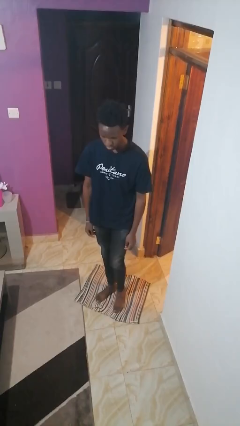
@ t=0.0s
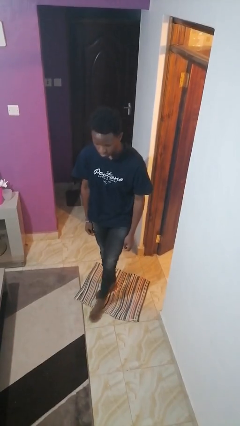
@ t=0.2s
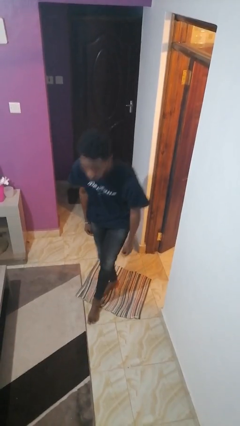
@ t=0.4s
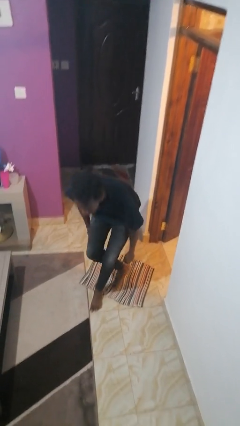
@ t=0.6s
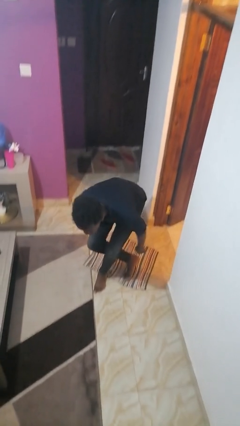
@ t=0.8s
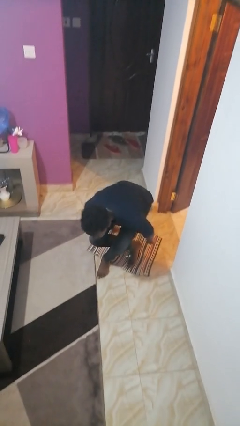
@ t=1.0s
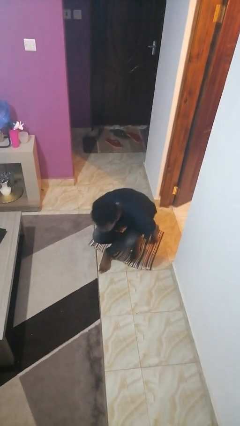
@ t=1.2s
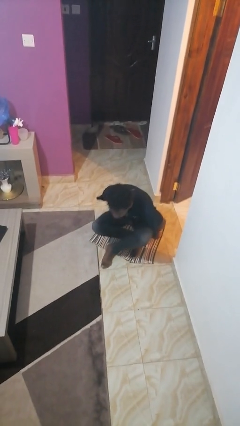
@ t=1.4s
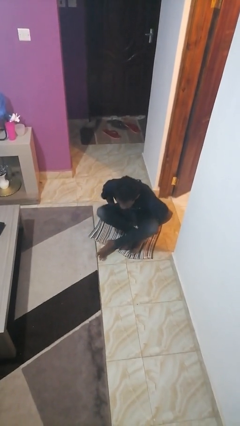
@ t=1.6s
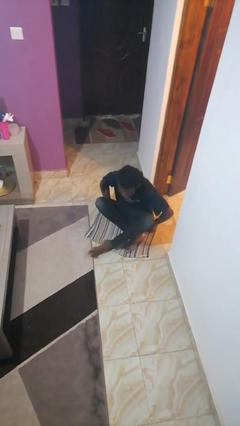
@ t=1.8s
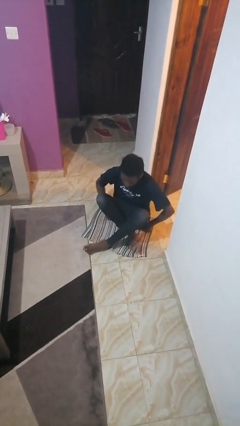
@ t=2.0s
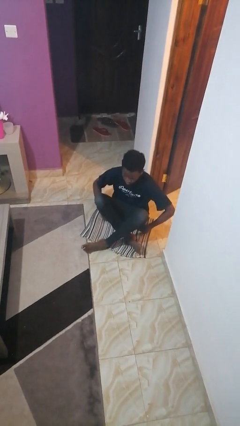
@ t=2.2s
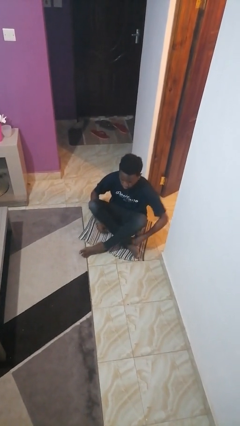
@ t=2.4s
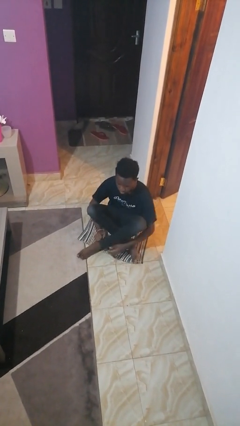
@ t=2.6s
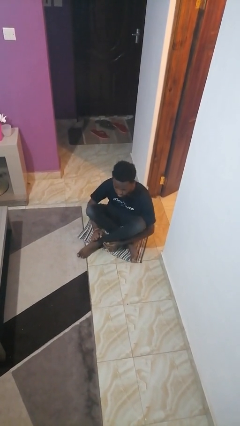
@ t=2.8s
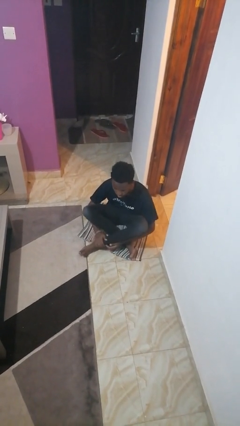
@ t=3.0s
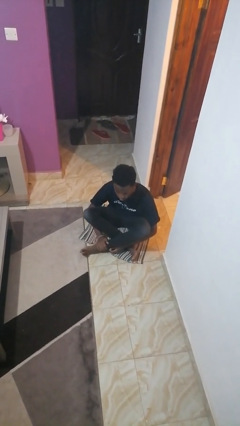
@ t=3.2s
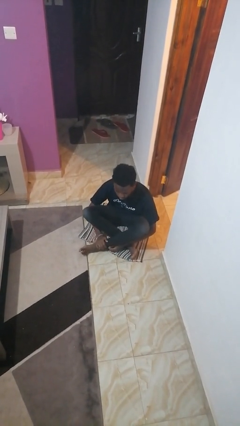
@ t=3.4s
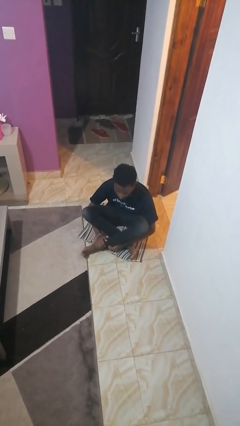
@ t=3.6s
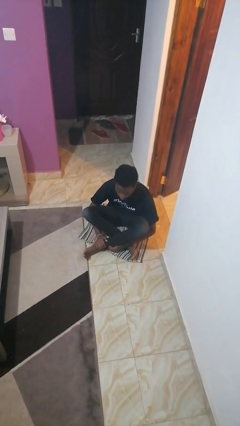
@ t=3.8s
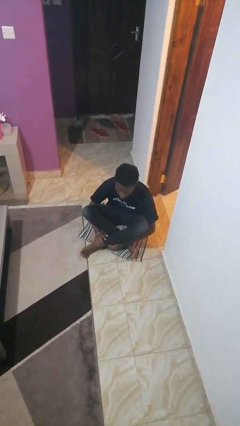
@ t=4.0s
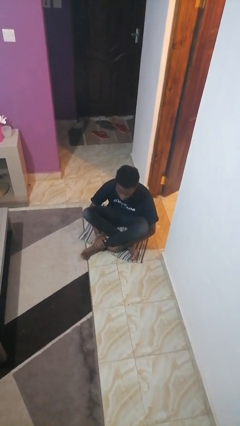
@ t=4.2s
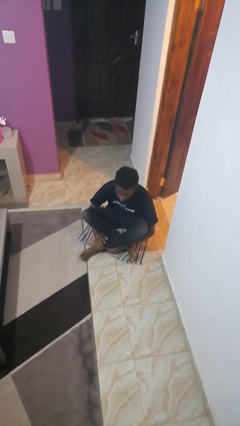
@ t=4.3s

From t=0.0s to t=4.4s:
person sits crisscross

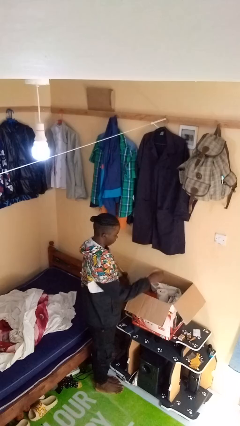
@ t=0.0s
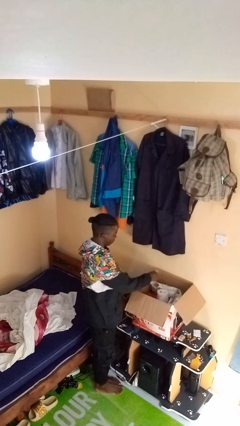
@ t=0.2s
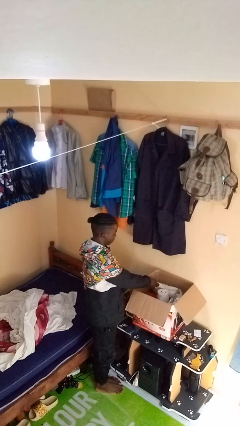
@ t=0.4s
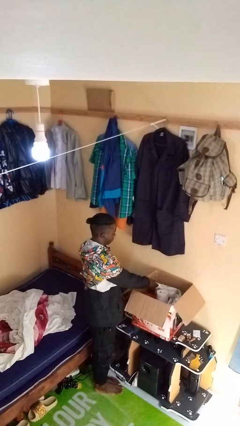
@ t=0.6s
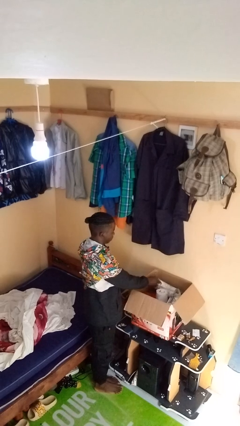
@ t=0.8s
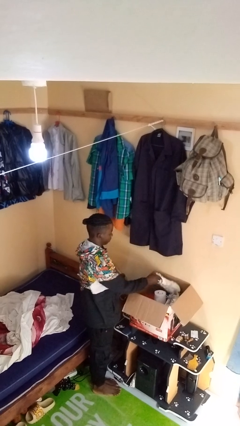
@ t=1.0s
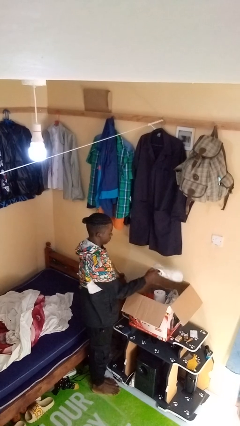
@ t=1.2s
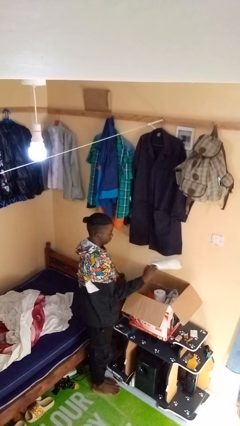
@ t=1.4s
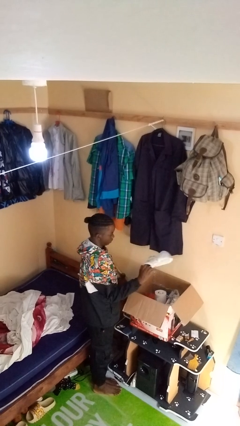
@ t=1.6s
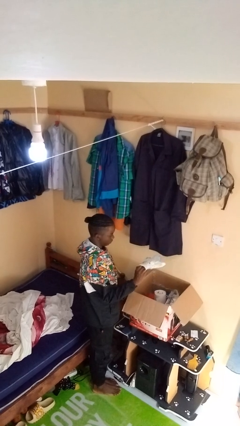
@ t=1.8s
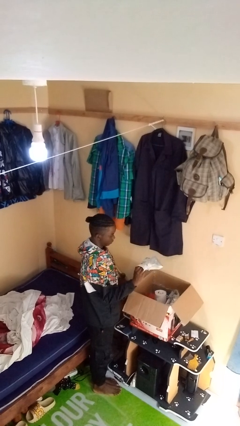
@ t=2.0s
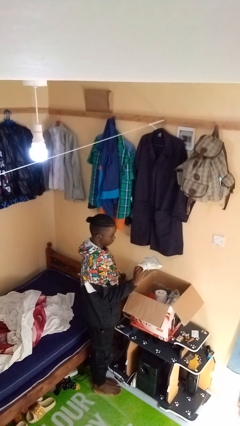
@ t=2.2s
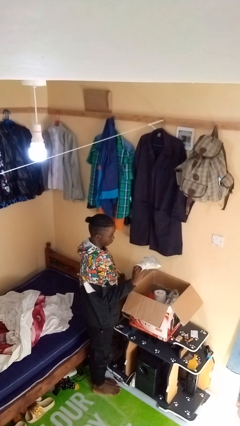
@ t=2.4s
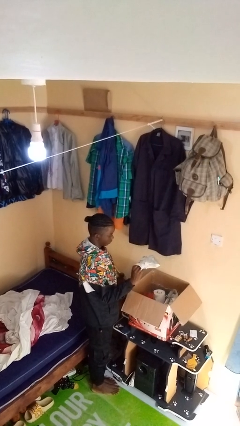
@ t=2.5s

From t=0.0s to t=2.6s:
person takes object from box

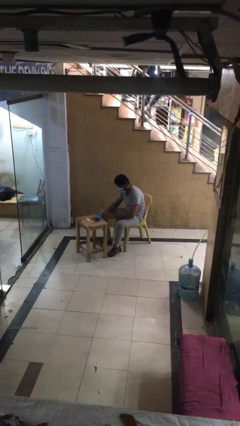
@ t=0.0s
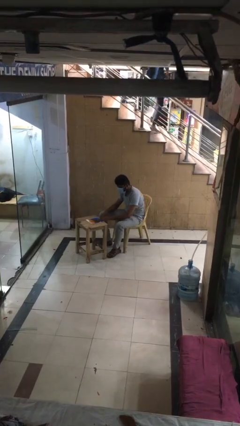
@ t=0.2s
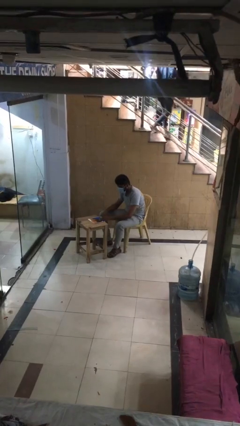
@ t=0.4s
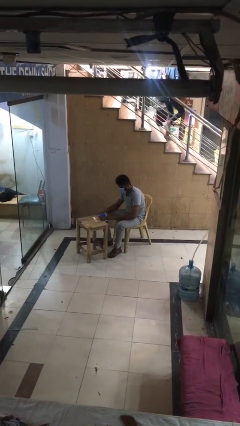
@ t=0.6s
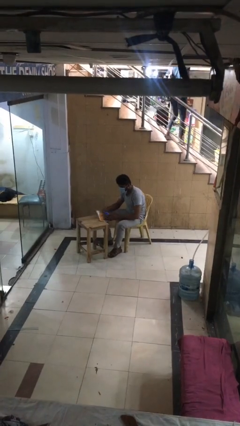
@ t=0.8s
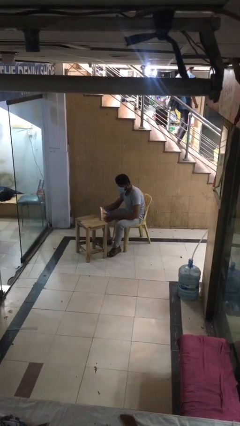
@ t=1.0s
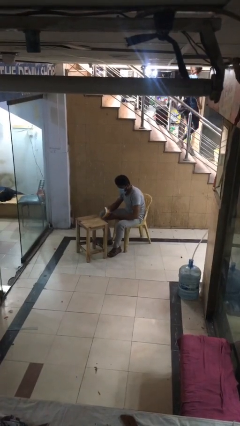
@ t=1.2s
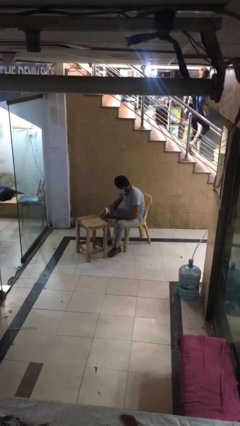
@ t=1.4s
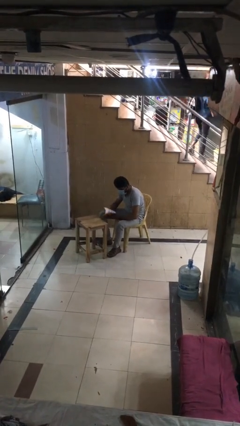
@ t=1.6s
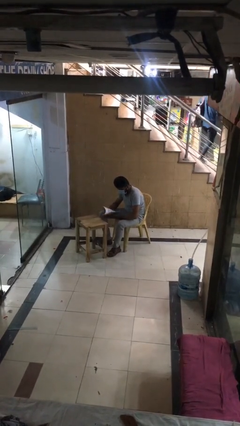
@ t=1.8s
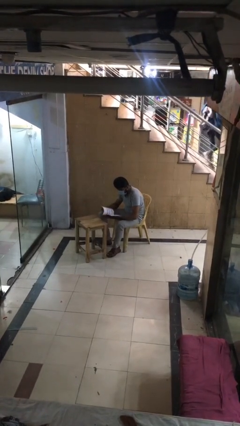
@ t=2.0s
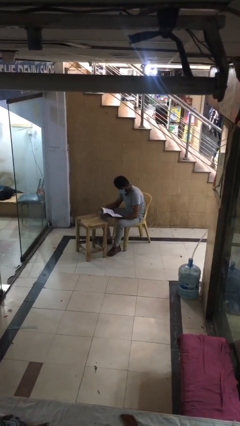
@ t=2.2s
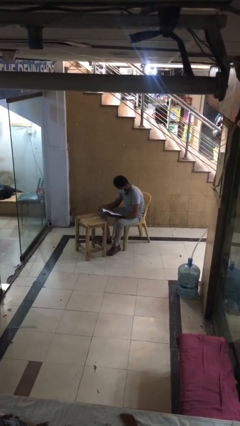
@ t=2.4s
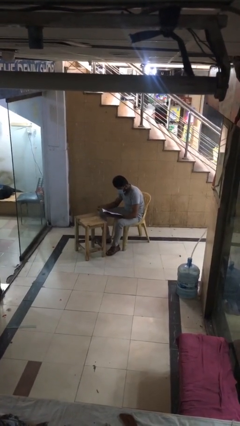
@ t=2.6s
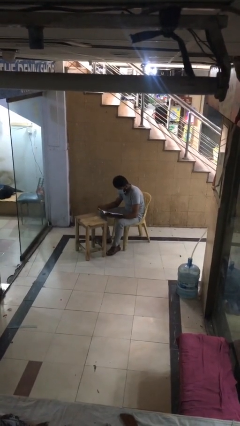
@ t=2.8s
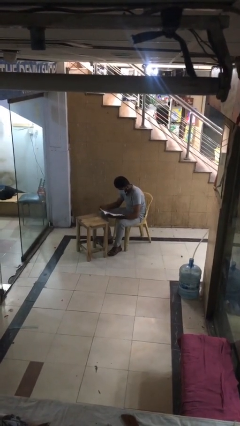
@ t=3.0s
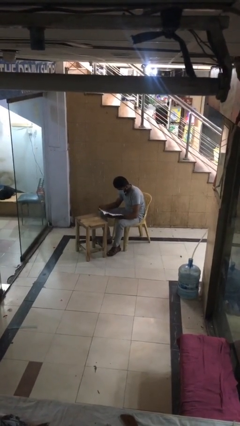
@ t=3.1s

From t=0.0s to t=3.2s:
person picks up object from table

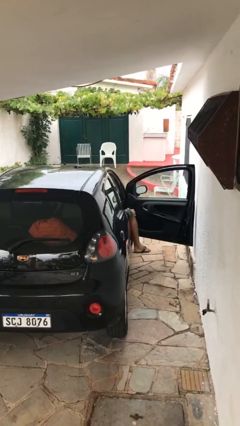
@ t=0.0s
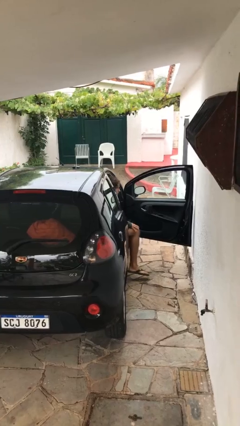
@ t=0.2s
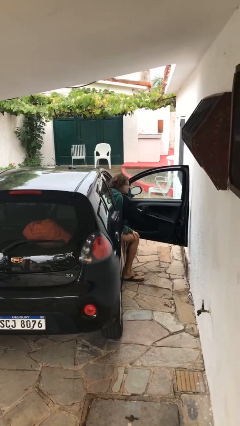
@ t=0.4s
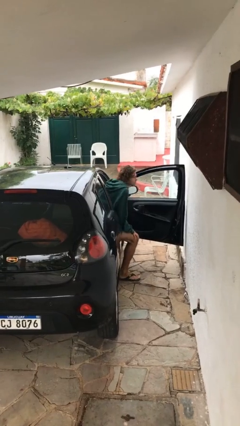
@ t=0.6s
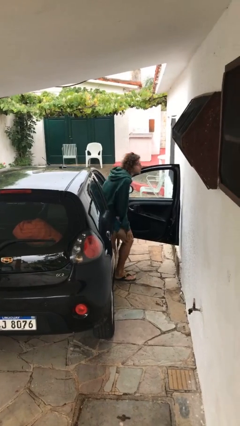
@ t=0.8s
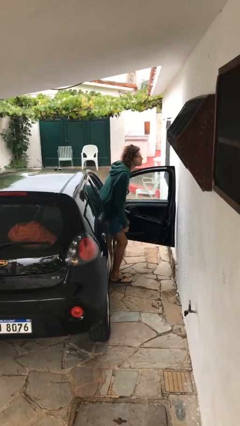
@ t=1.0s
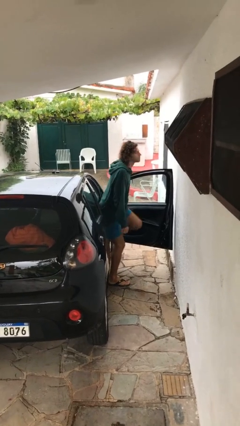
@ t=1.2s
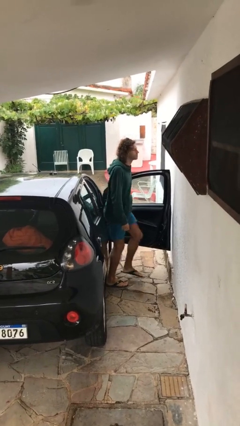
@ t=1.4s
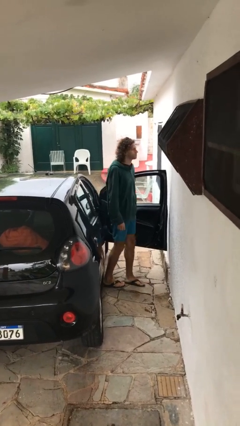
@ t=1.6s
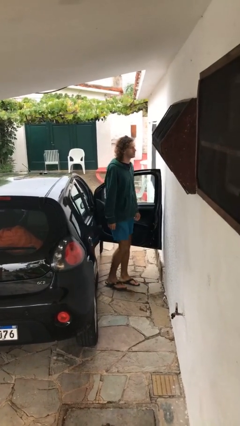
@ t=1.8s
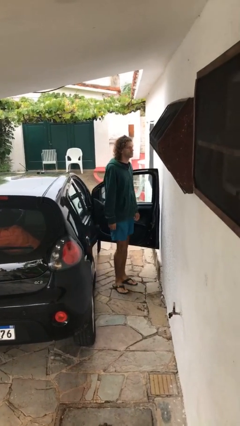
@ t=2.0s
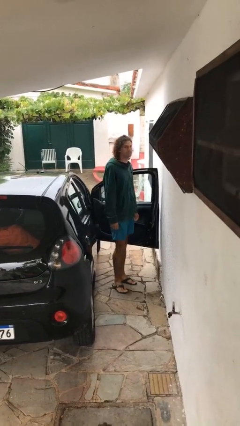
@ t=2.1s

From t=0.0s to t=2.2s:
person exits car

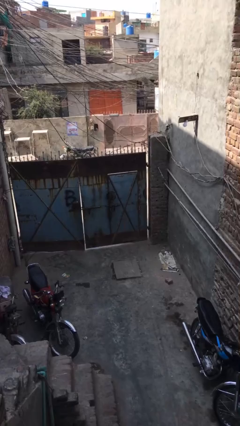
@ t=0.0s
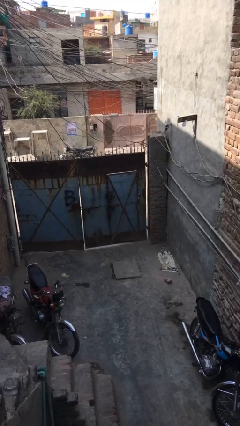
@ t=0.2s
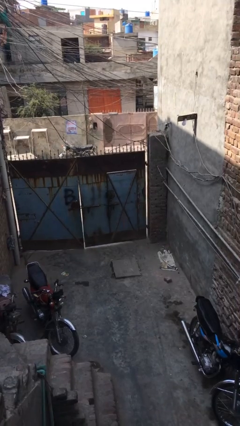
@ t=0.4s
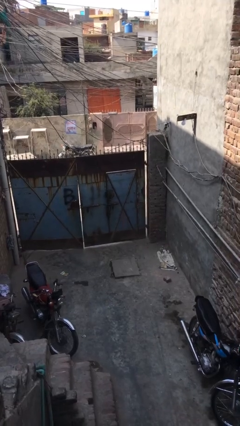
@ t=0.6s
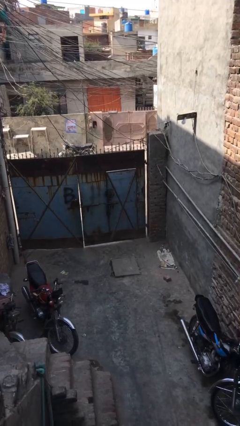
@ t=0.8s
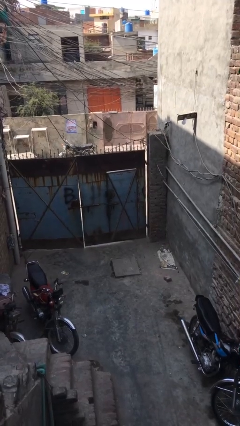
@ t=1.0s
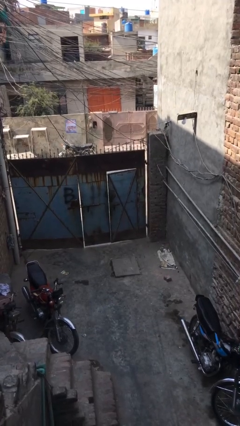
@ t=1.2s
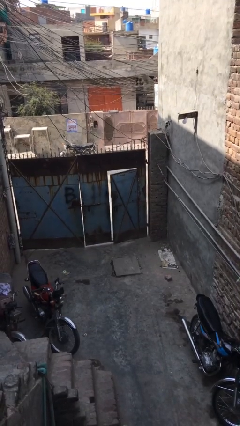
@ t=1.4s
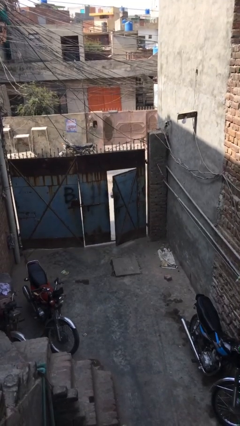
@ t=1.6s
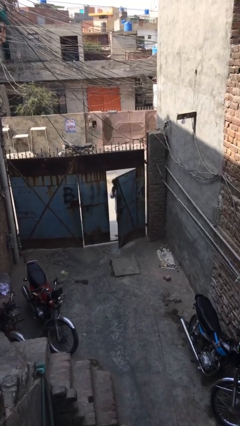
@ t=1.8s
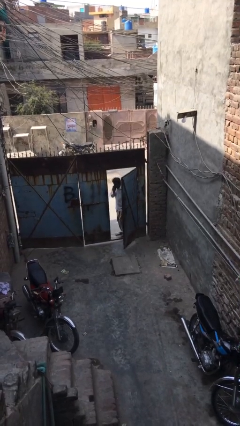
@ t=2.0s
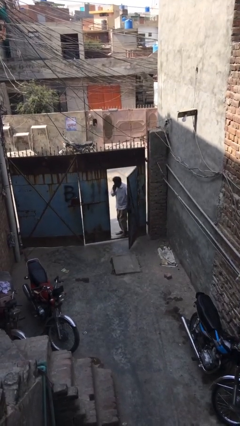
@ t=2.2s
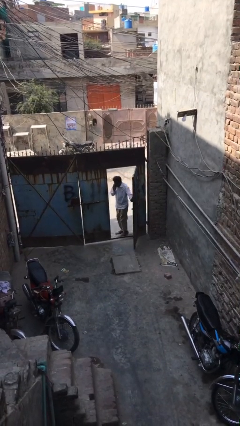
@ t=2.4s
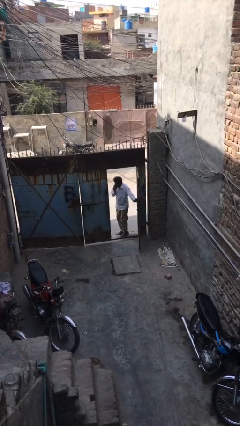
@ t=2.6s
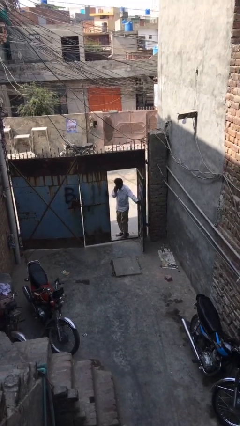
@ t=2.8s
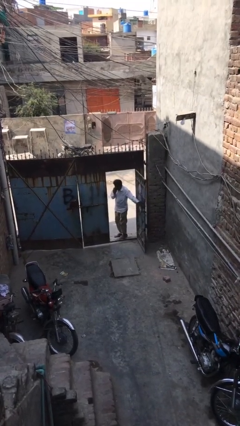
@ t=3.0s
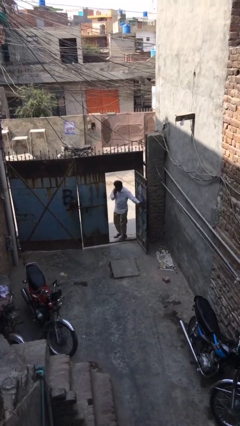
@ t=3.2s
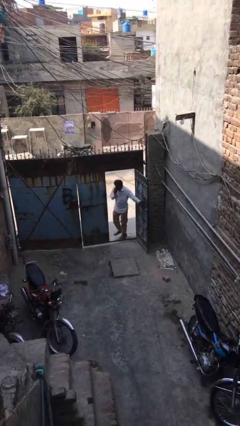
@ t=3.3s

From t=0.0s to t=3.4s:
person opens facility door

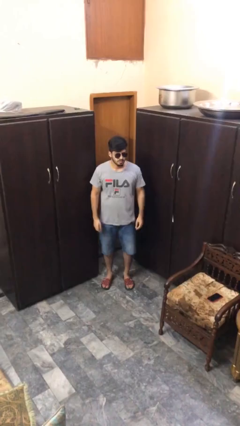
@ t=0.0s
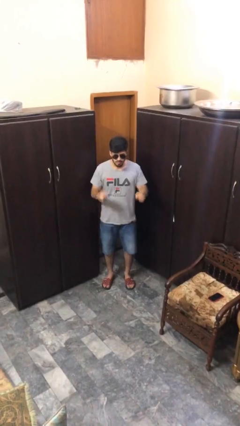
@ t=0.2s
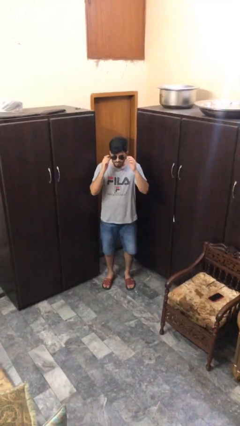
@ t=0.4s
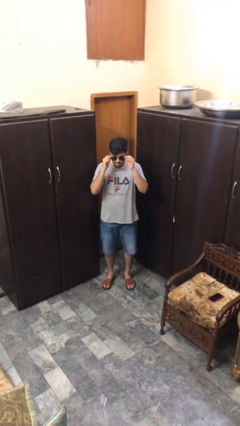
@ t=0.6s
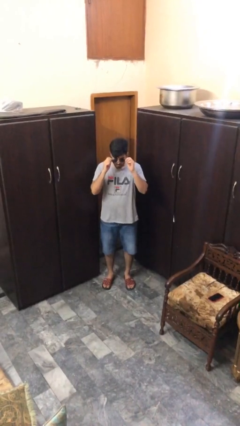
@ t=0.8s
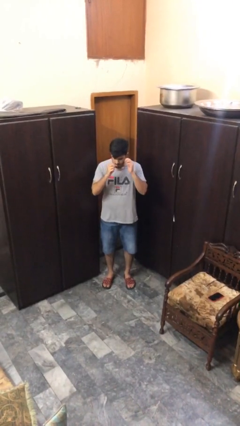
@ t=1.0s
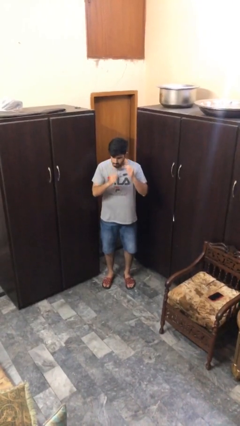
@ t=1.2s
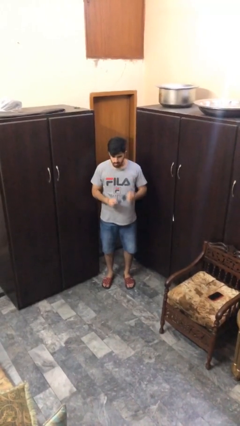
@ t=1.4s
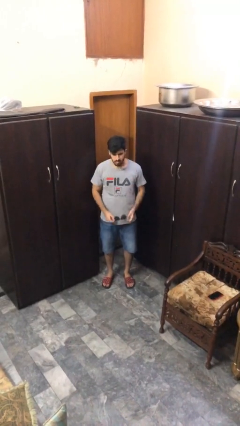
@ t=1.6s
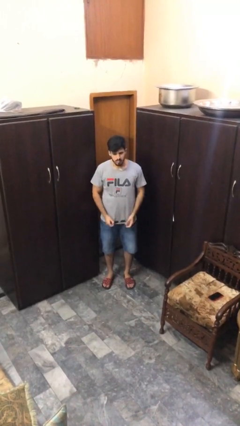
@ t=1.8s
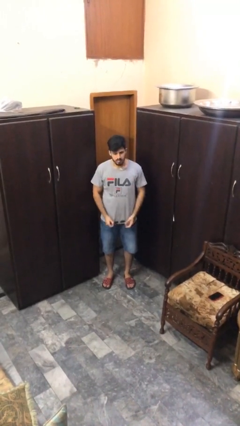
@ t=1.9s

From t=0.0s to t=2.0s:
person takes off sunglasses
